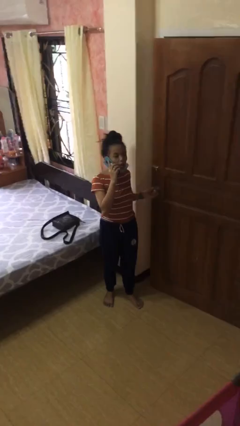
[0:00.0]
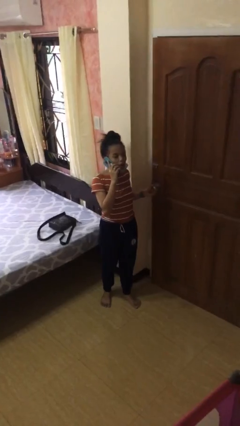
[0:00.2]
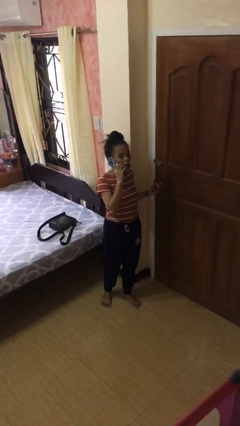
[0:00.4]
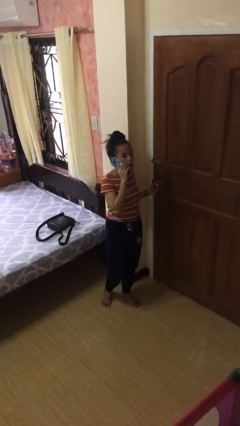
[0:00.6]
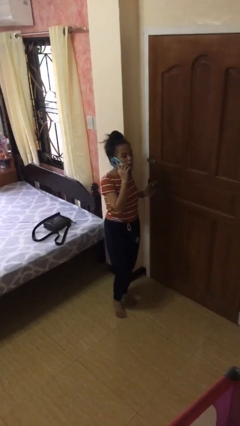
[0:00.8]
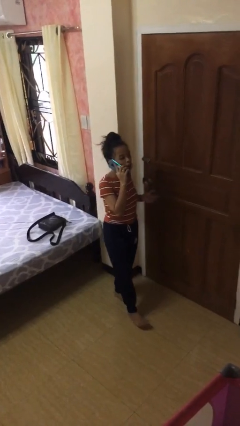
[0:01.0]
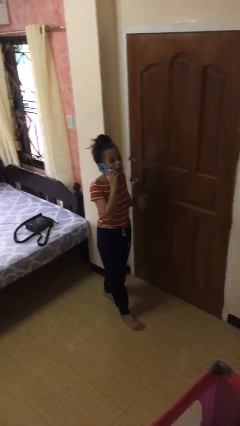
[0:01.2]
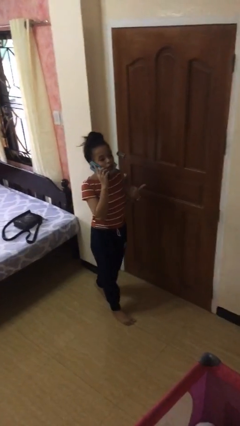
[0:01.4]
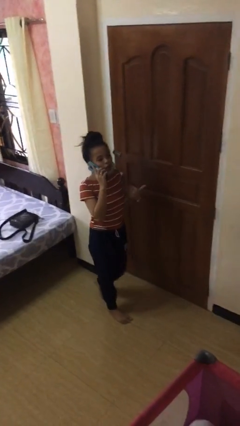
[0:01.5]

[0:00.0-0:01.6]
person closes facility door

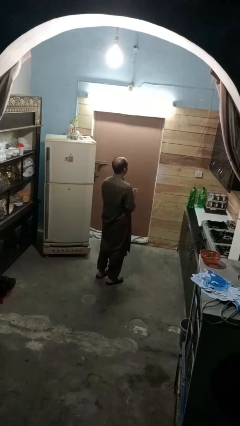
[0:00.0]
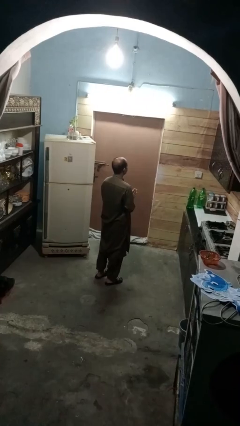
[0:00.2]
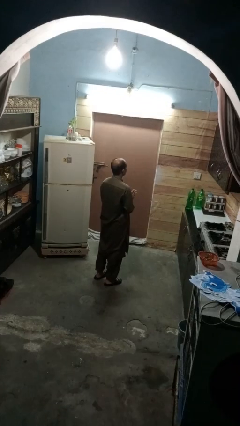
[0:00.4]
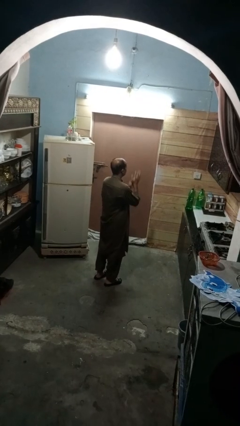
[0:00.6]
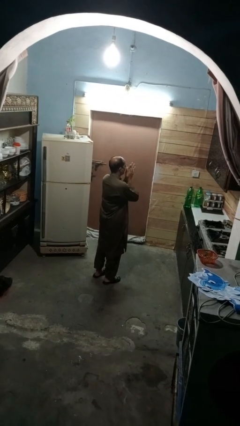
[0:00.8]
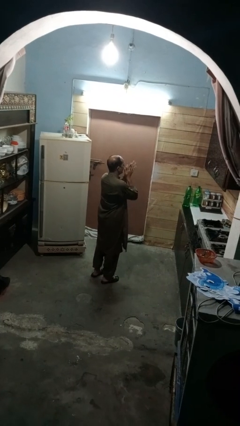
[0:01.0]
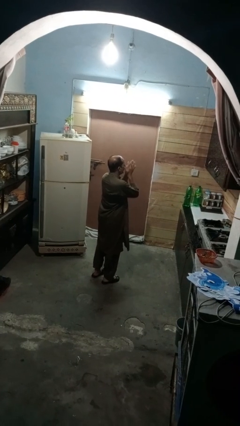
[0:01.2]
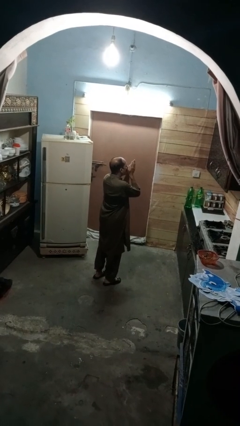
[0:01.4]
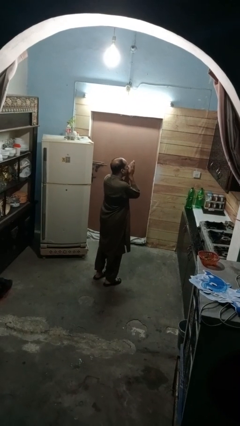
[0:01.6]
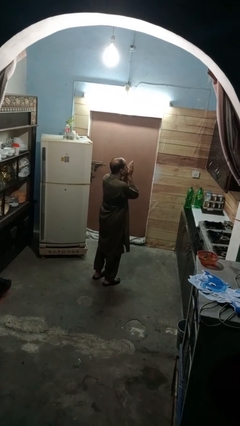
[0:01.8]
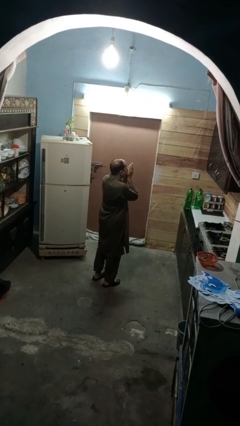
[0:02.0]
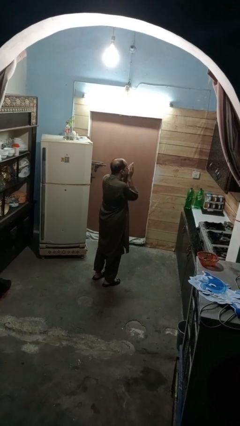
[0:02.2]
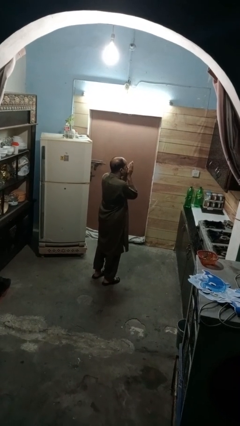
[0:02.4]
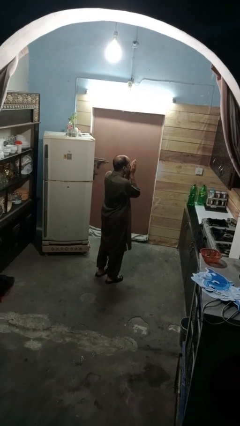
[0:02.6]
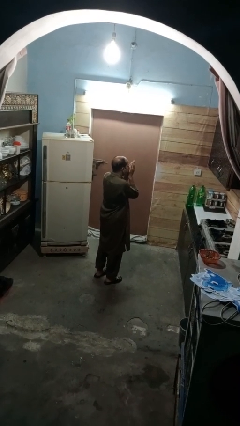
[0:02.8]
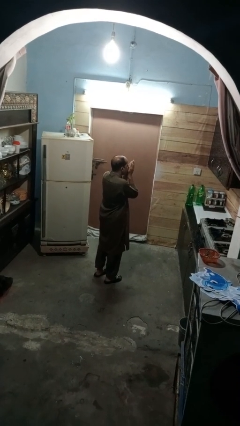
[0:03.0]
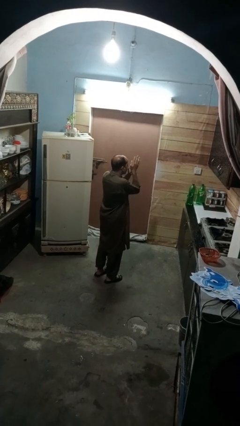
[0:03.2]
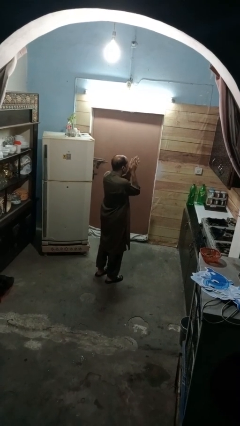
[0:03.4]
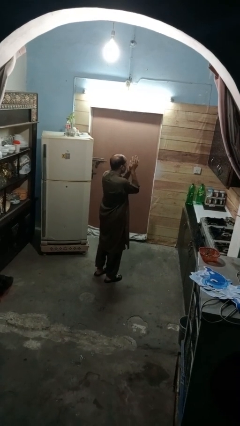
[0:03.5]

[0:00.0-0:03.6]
person blows into hands

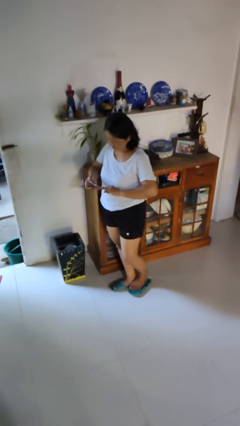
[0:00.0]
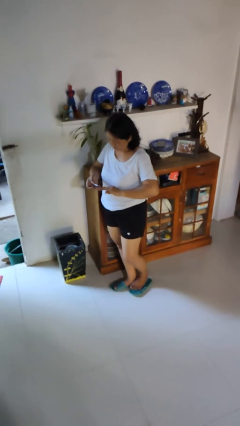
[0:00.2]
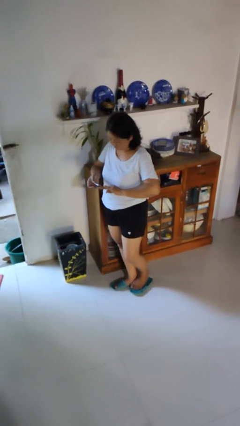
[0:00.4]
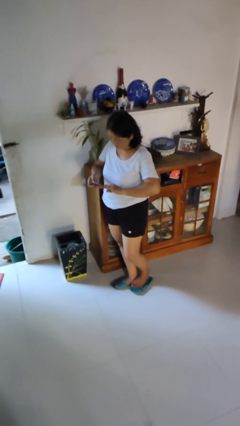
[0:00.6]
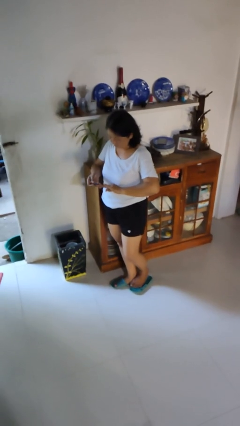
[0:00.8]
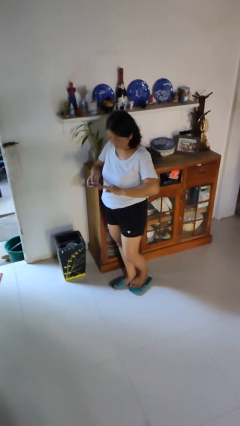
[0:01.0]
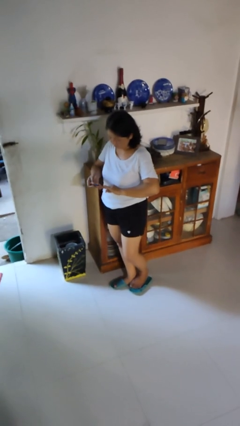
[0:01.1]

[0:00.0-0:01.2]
person clips fingernails

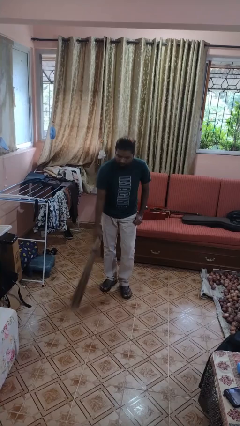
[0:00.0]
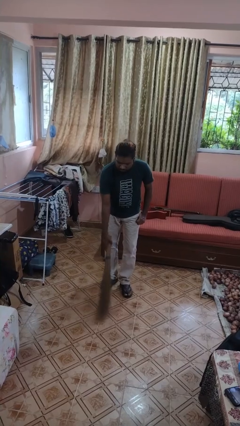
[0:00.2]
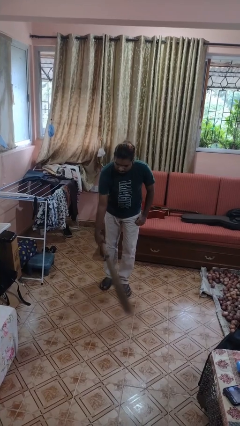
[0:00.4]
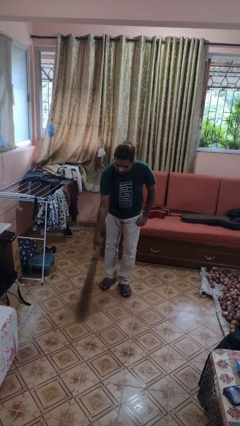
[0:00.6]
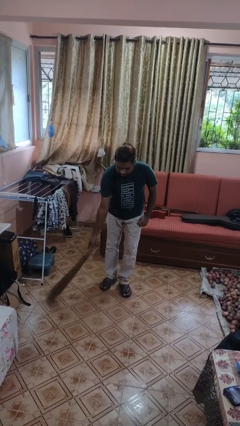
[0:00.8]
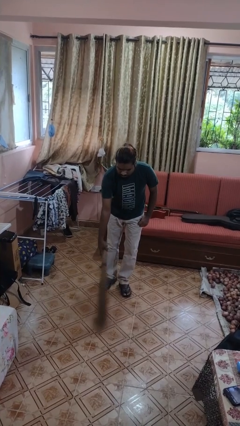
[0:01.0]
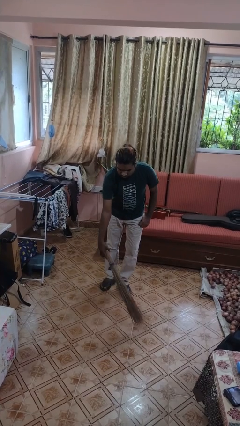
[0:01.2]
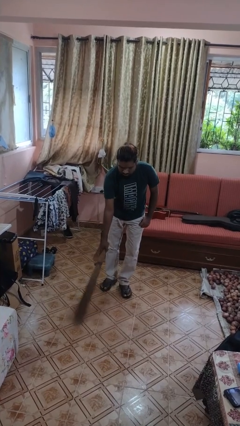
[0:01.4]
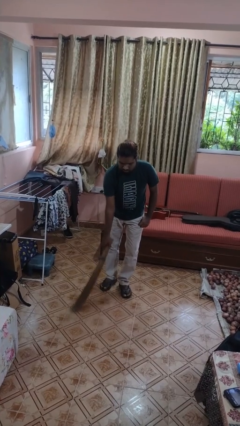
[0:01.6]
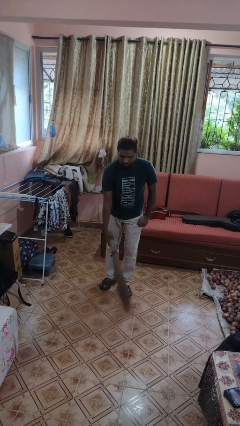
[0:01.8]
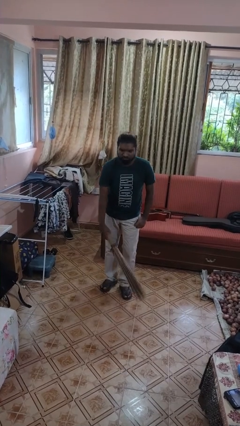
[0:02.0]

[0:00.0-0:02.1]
person sweeps floor

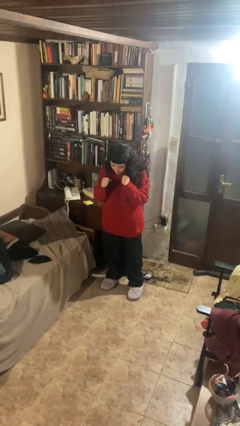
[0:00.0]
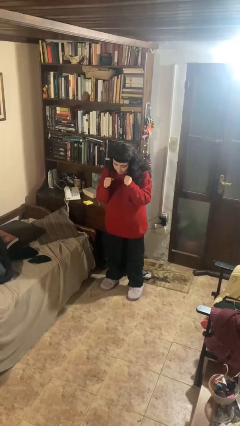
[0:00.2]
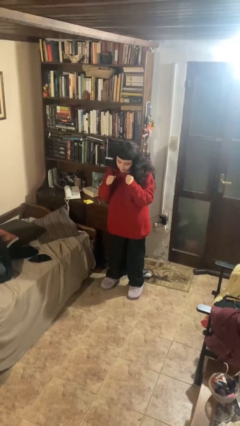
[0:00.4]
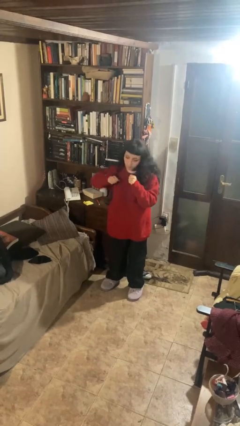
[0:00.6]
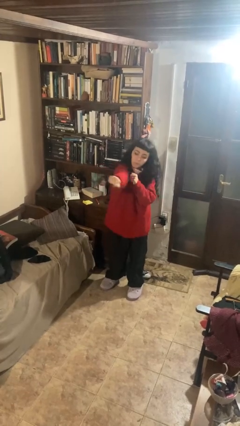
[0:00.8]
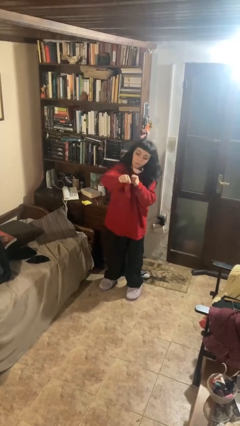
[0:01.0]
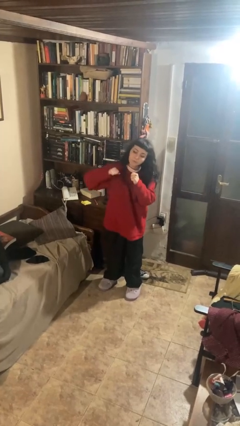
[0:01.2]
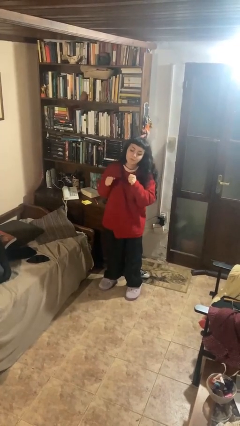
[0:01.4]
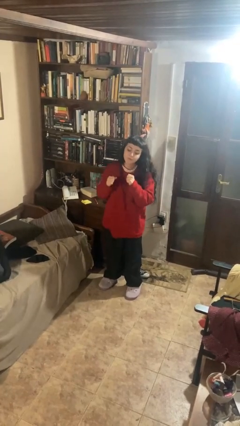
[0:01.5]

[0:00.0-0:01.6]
person punches

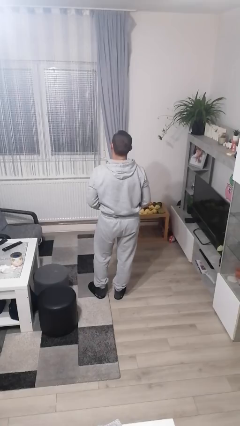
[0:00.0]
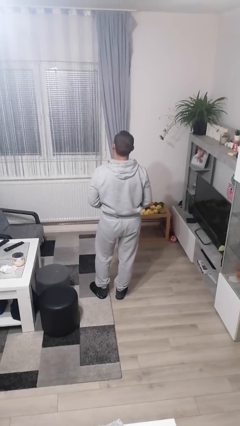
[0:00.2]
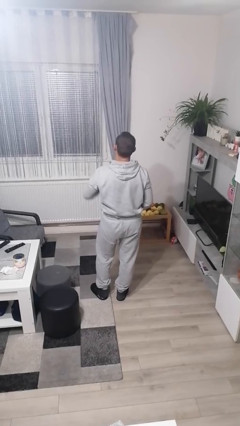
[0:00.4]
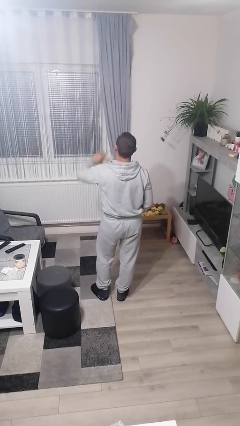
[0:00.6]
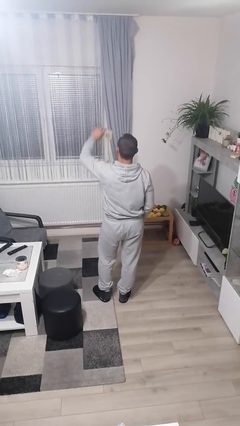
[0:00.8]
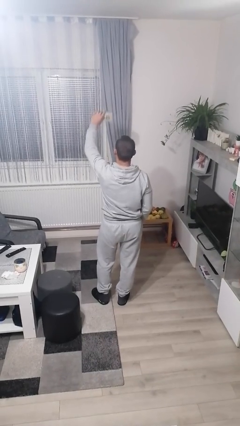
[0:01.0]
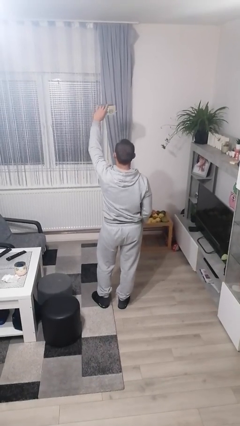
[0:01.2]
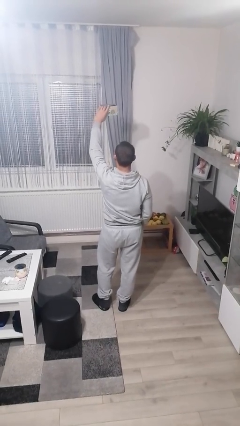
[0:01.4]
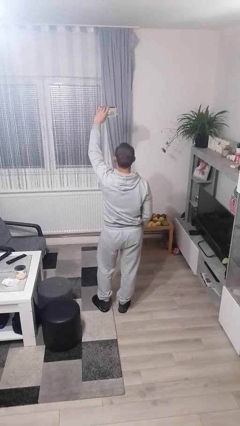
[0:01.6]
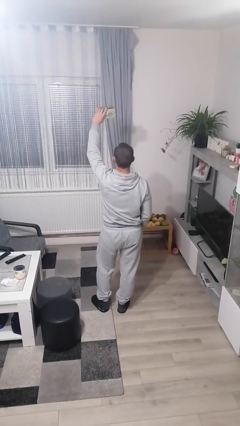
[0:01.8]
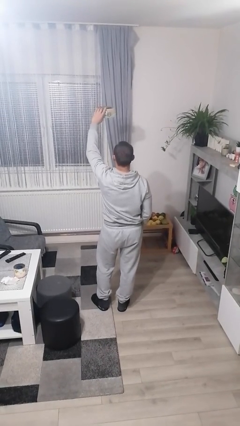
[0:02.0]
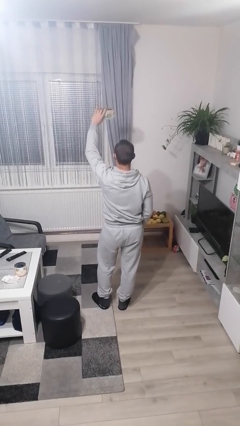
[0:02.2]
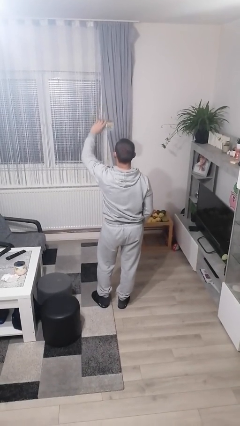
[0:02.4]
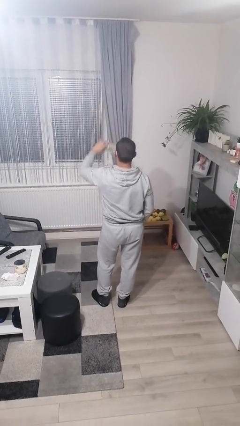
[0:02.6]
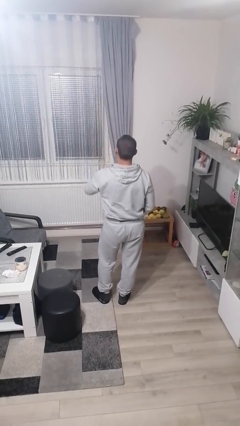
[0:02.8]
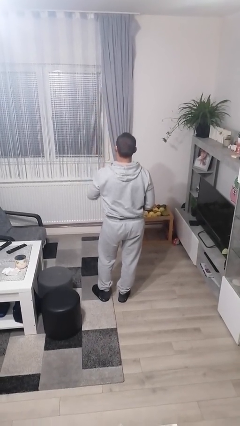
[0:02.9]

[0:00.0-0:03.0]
person holds object above head

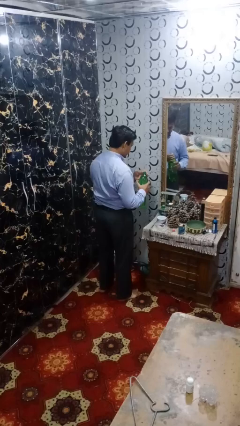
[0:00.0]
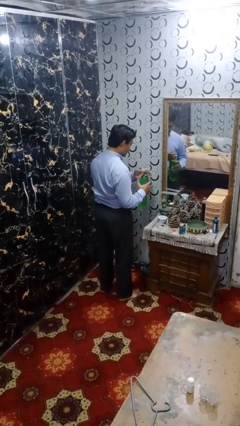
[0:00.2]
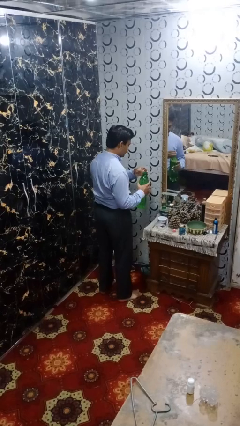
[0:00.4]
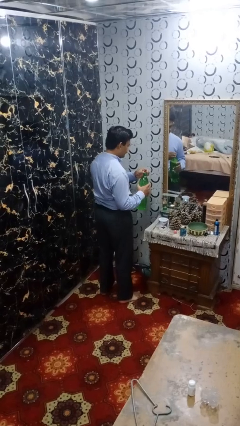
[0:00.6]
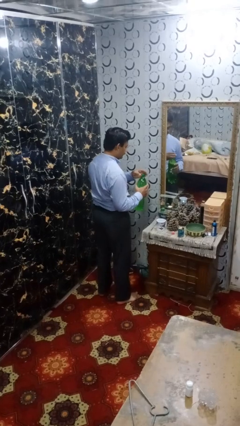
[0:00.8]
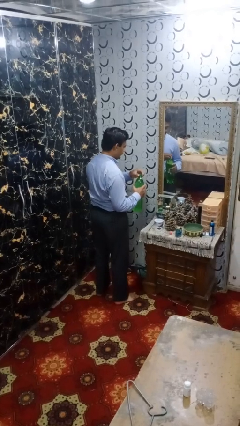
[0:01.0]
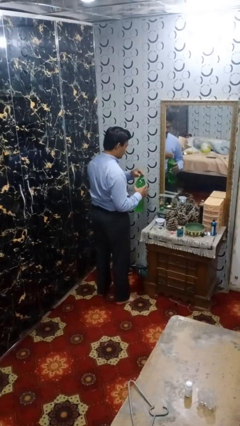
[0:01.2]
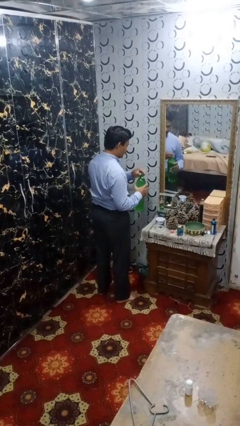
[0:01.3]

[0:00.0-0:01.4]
person unscrews lid from bottle

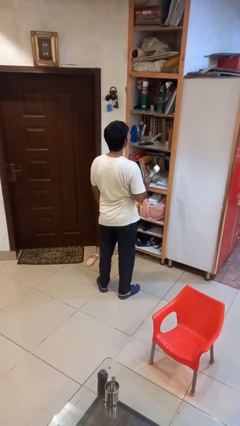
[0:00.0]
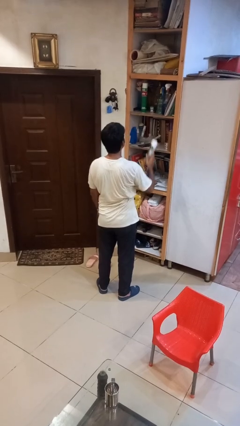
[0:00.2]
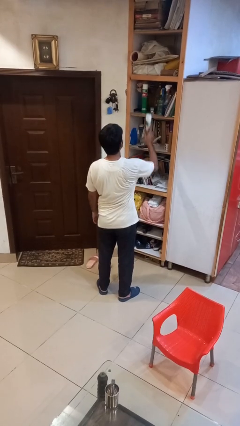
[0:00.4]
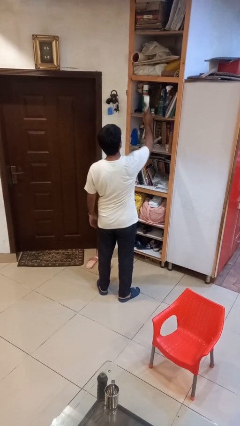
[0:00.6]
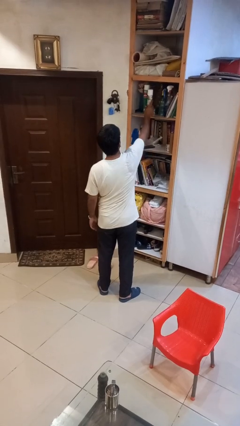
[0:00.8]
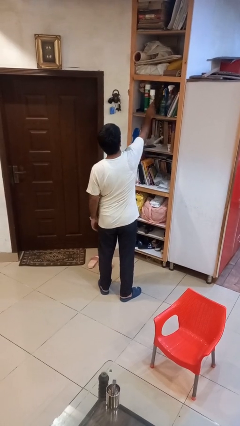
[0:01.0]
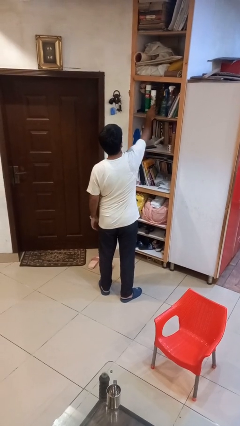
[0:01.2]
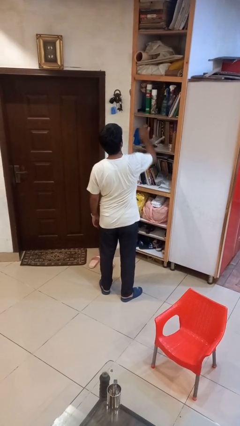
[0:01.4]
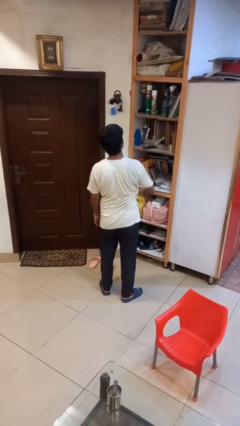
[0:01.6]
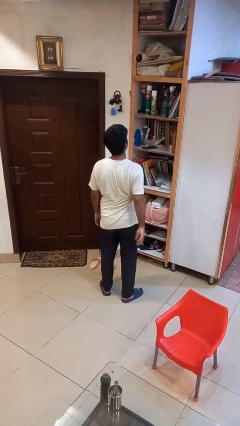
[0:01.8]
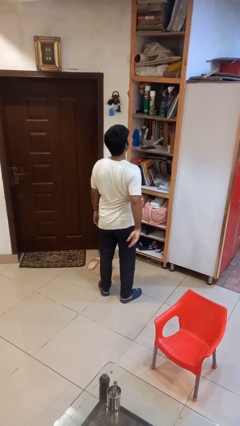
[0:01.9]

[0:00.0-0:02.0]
person puts down object on shelf

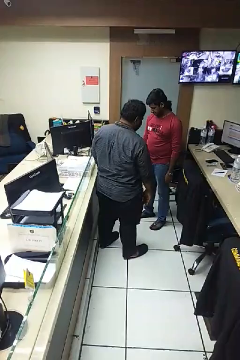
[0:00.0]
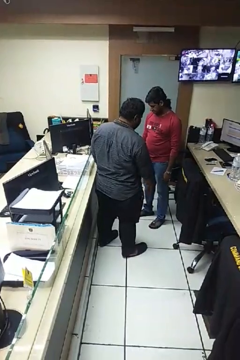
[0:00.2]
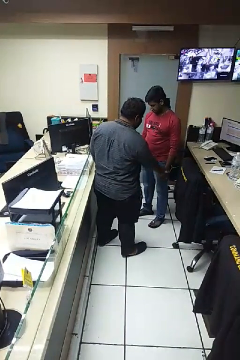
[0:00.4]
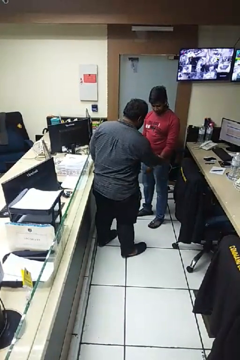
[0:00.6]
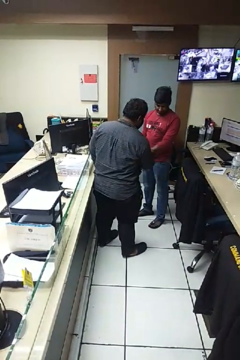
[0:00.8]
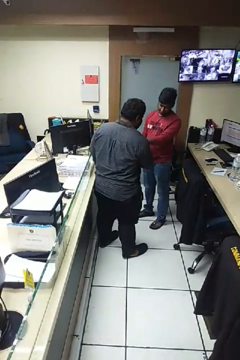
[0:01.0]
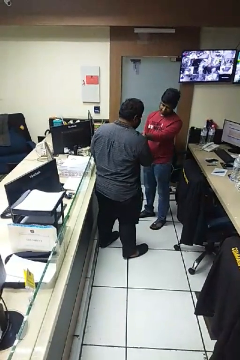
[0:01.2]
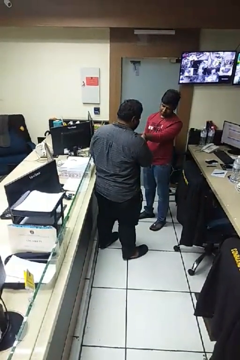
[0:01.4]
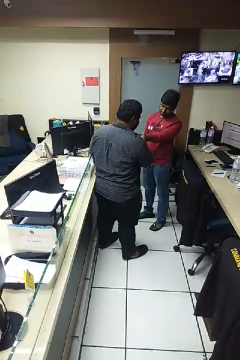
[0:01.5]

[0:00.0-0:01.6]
person grabs person by forearm
